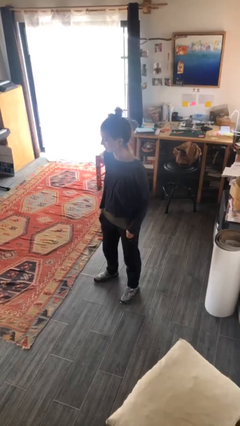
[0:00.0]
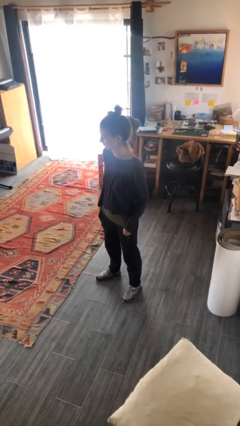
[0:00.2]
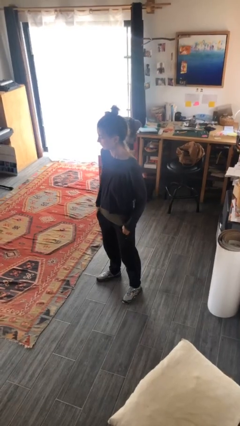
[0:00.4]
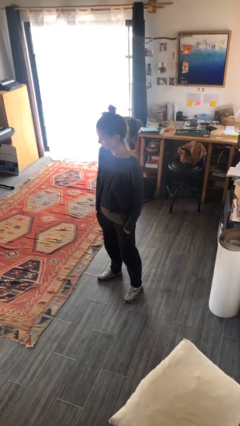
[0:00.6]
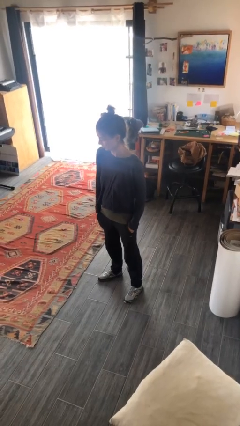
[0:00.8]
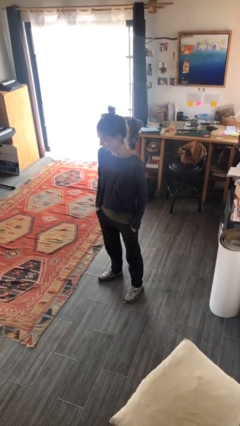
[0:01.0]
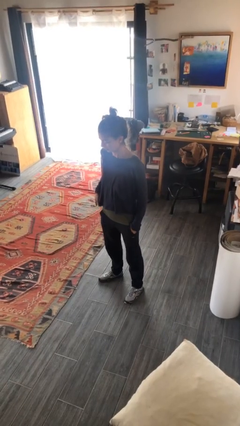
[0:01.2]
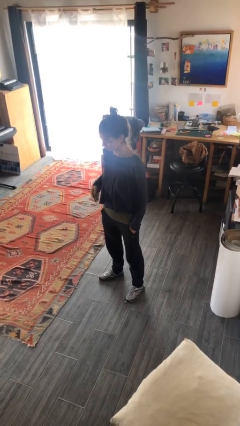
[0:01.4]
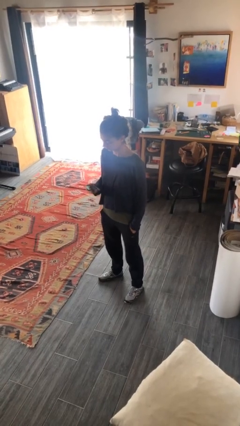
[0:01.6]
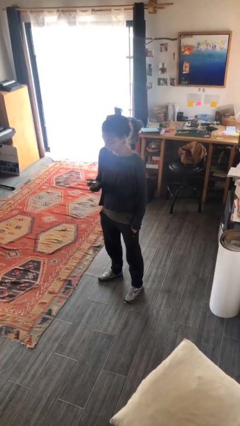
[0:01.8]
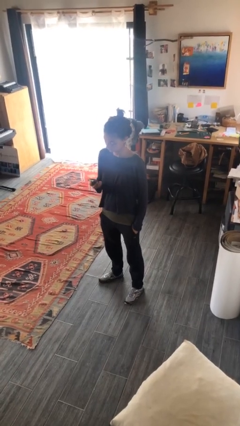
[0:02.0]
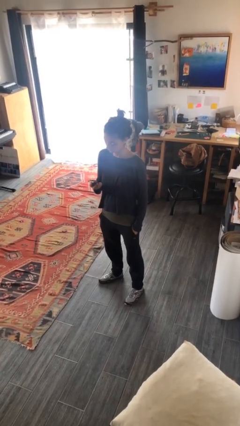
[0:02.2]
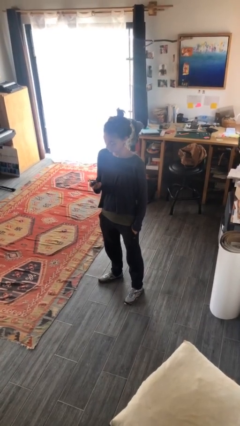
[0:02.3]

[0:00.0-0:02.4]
person takes phone from pocket

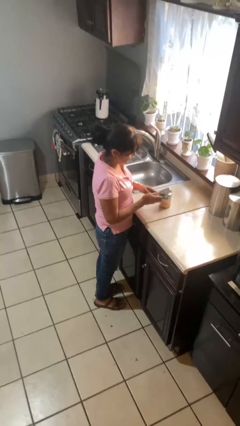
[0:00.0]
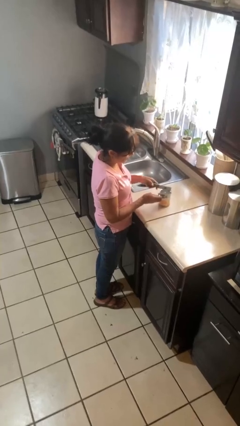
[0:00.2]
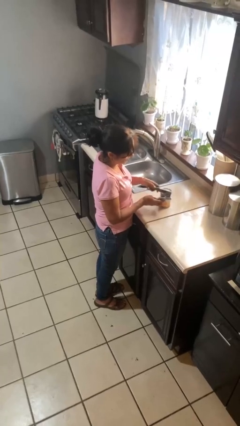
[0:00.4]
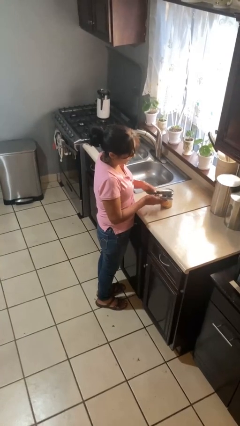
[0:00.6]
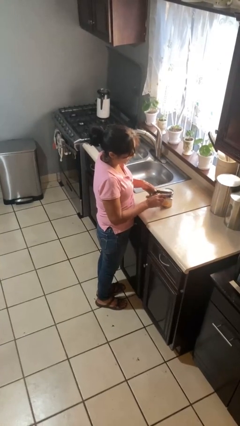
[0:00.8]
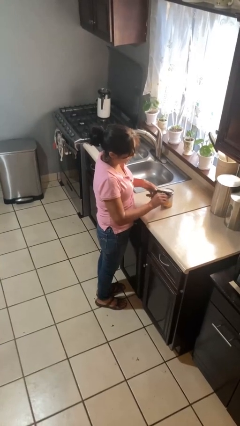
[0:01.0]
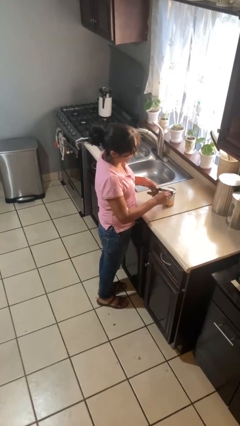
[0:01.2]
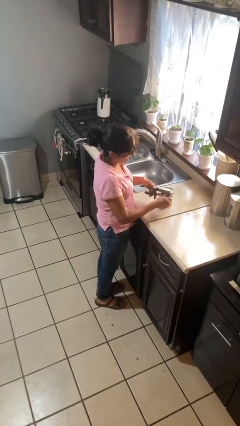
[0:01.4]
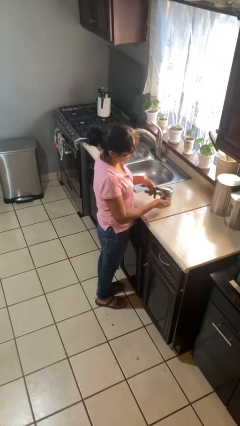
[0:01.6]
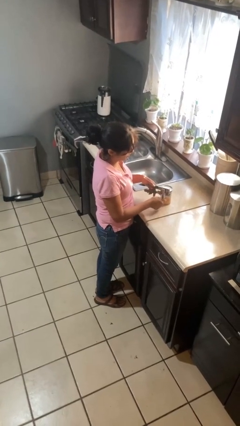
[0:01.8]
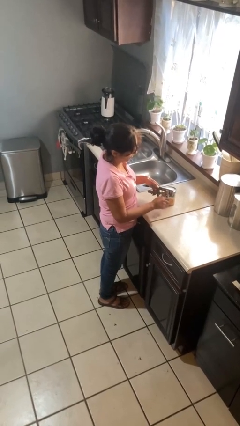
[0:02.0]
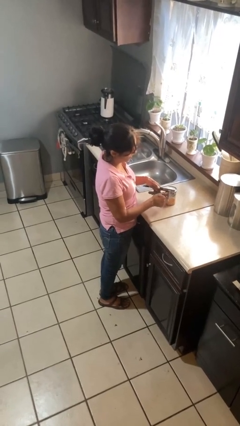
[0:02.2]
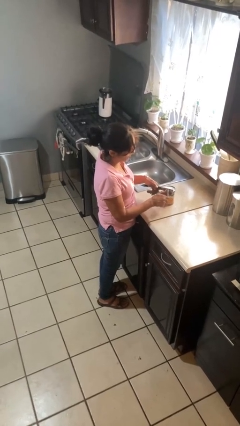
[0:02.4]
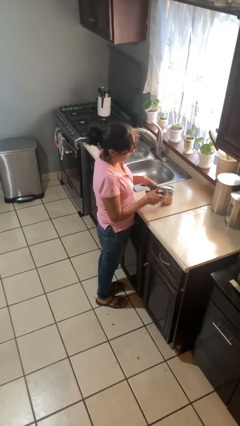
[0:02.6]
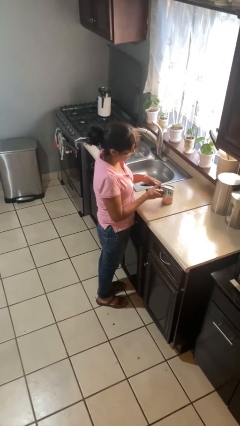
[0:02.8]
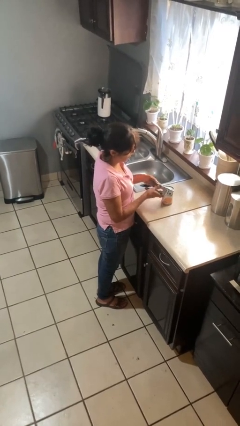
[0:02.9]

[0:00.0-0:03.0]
person opens can with can opener

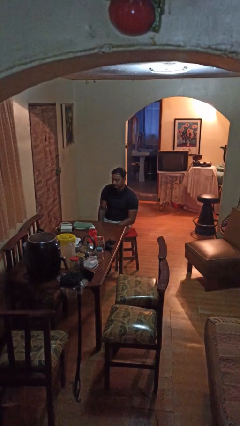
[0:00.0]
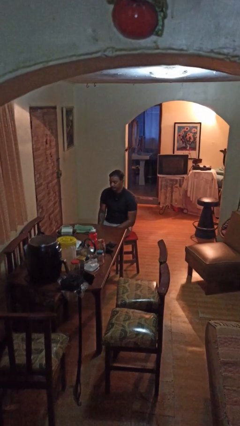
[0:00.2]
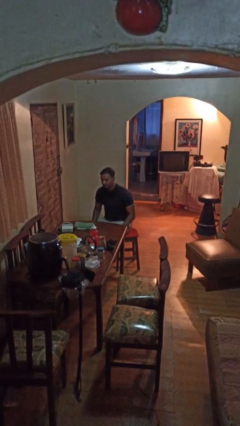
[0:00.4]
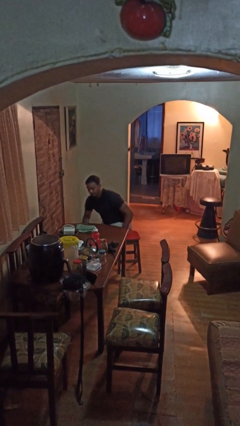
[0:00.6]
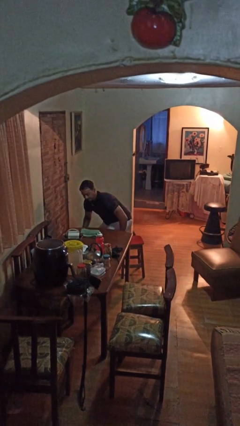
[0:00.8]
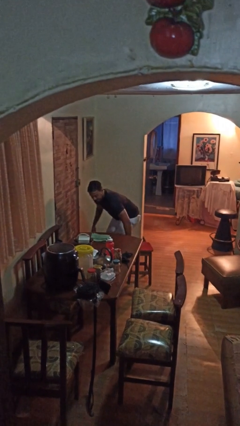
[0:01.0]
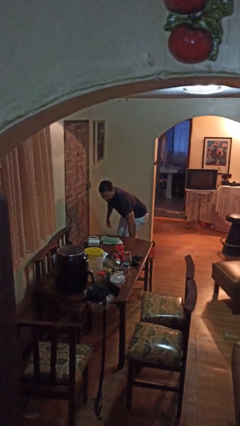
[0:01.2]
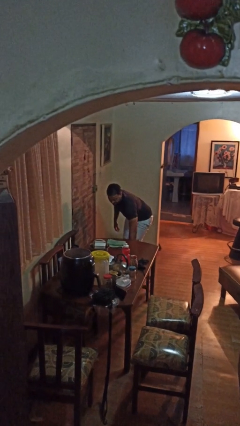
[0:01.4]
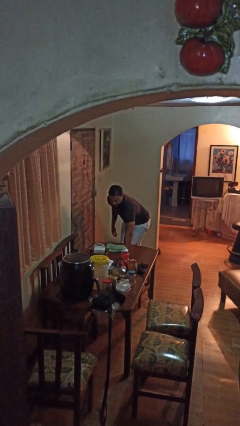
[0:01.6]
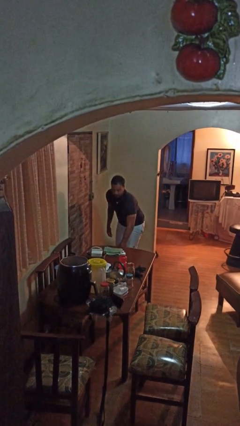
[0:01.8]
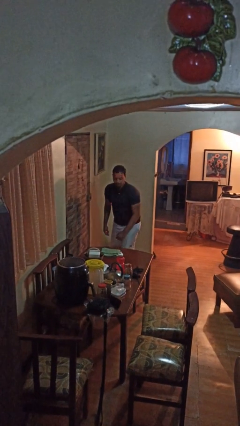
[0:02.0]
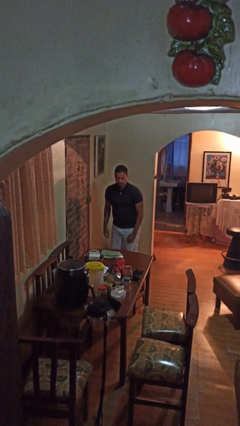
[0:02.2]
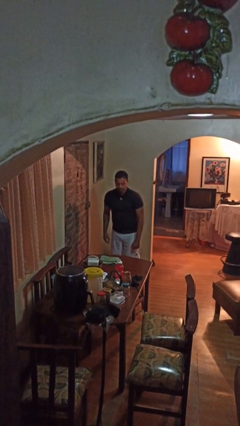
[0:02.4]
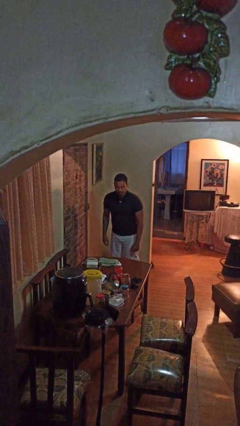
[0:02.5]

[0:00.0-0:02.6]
person stands up

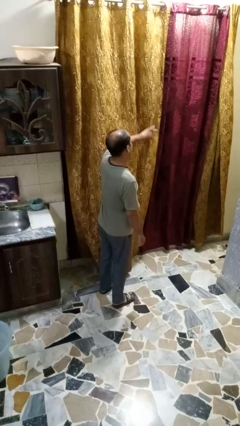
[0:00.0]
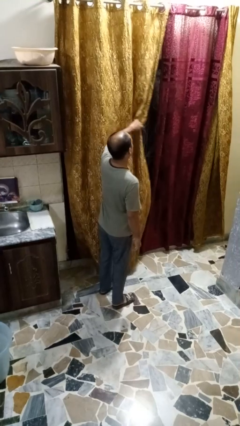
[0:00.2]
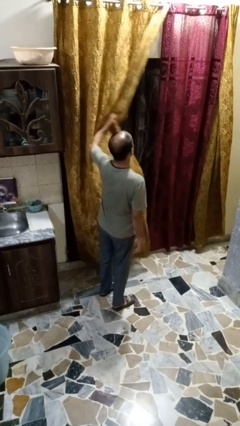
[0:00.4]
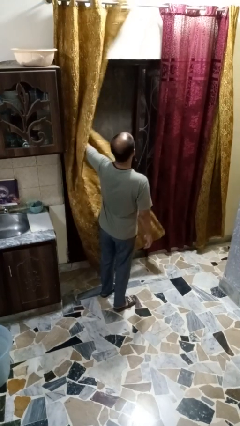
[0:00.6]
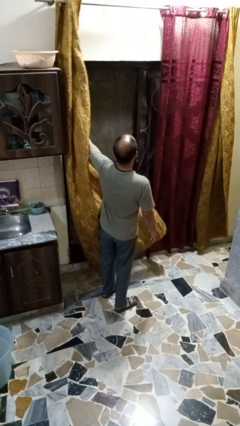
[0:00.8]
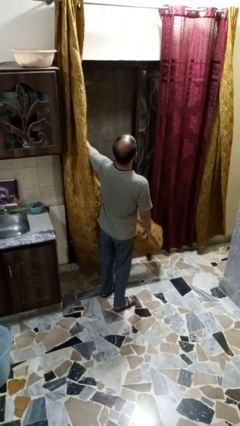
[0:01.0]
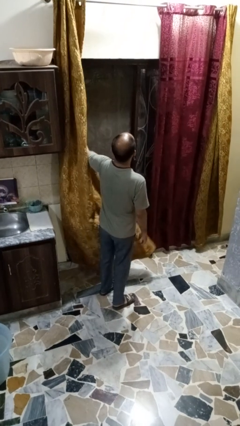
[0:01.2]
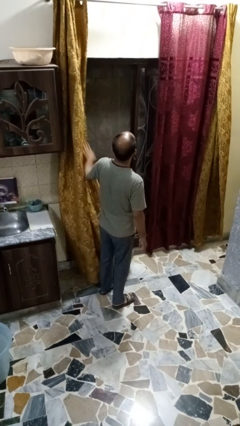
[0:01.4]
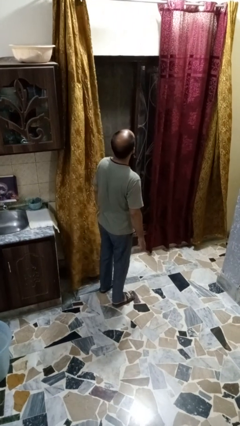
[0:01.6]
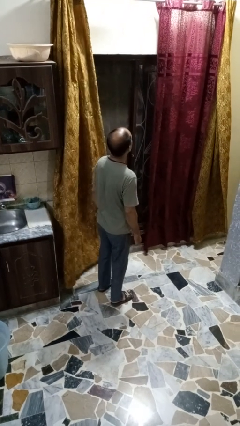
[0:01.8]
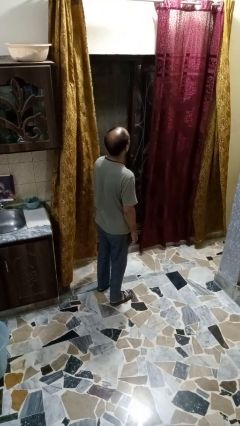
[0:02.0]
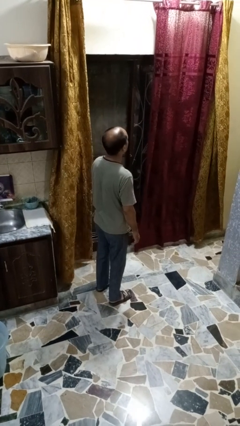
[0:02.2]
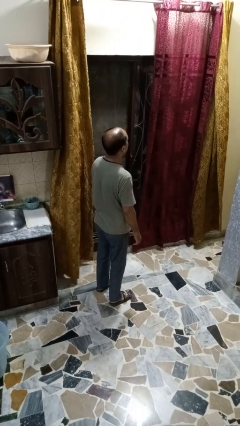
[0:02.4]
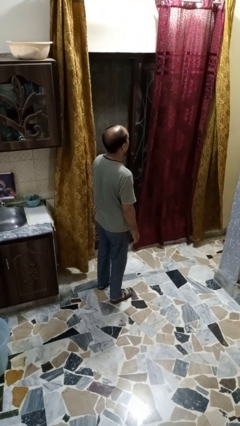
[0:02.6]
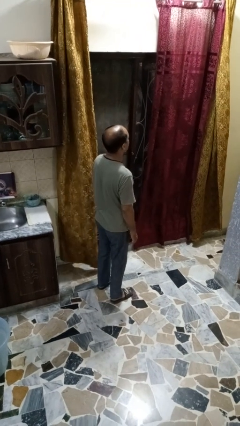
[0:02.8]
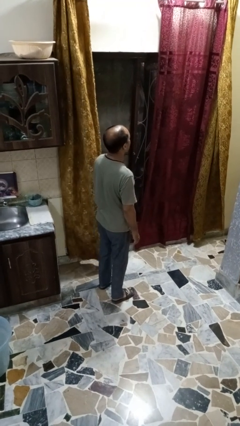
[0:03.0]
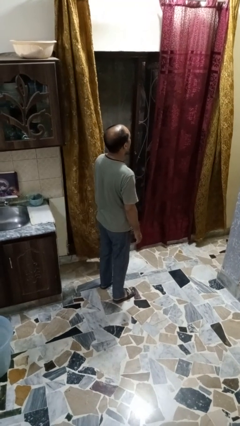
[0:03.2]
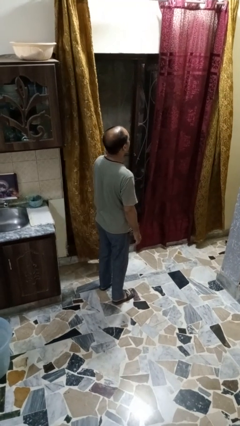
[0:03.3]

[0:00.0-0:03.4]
person opens curtains

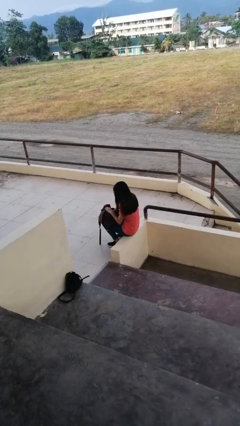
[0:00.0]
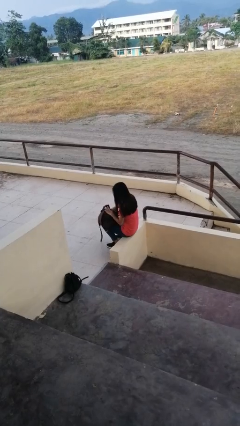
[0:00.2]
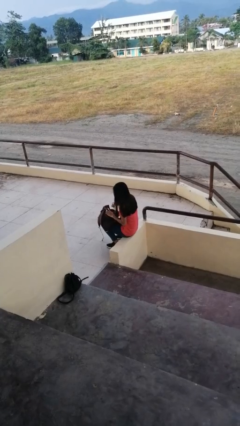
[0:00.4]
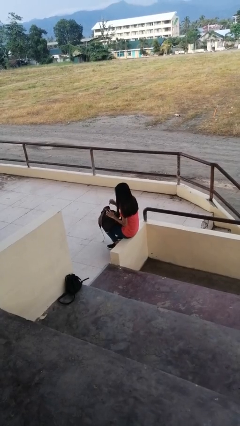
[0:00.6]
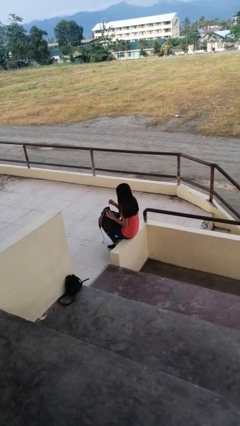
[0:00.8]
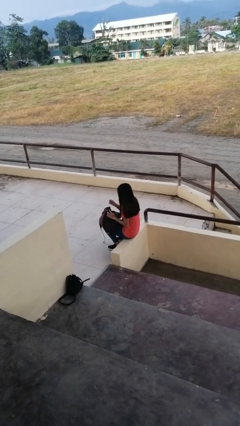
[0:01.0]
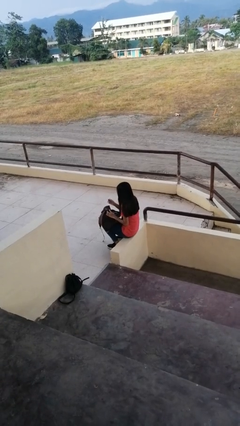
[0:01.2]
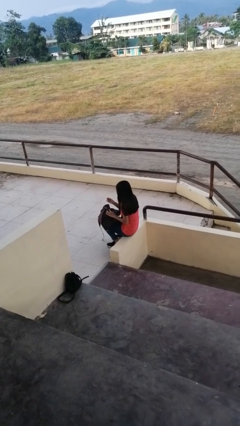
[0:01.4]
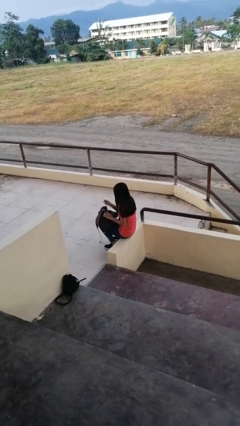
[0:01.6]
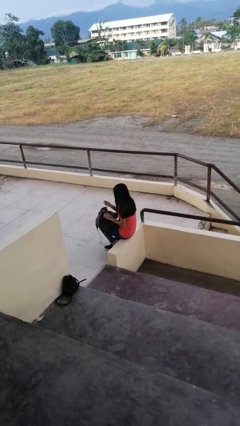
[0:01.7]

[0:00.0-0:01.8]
person takes object from backpack

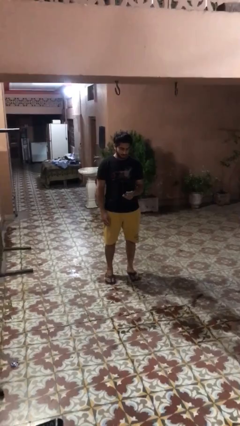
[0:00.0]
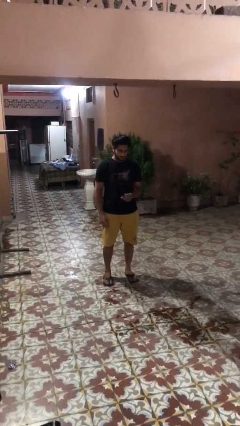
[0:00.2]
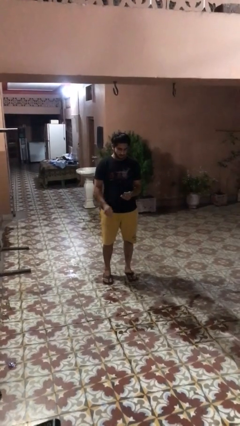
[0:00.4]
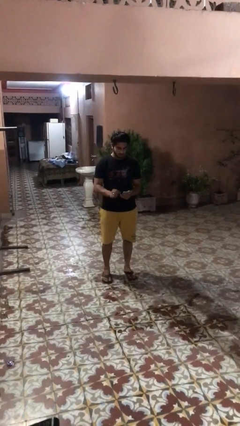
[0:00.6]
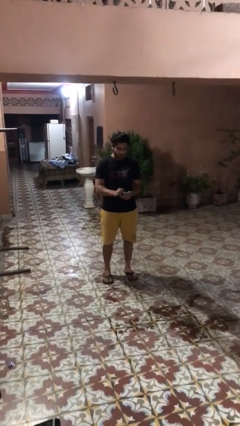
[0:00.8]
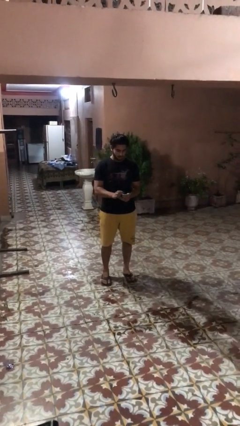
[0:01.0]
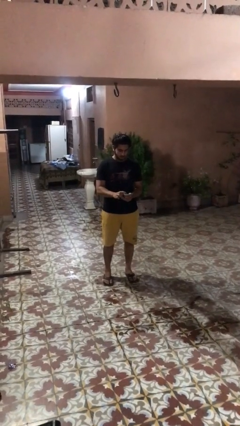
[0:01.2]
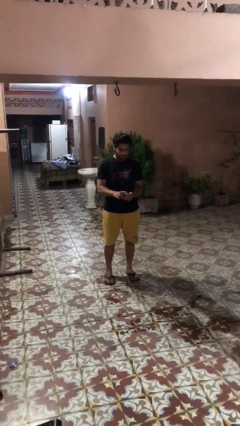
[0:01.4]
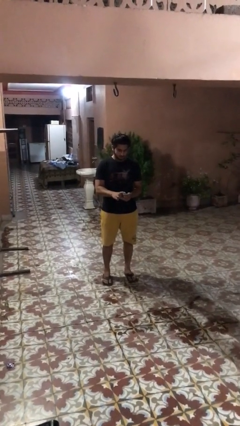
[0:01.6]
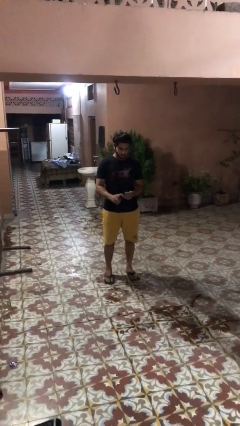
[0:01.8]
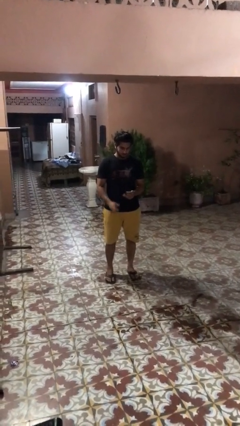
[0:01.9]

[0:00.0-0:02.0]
person gestures zoom in

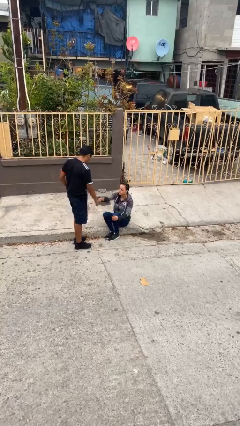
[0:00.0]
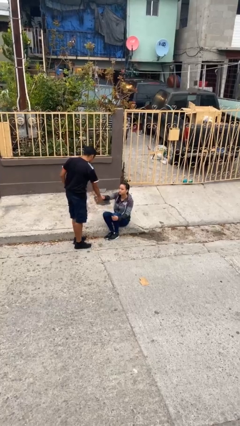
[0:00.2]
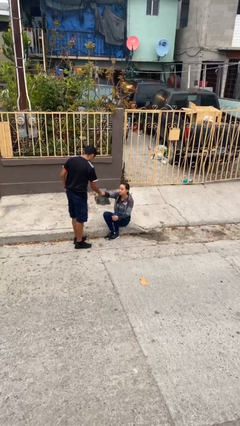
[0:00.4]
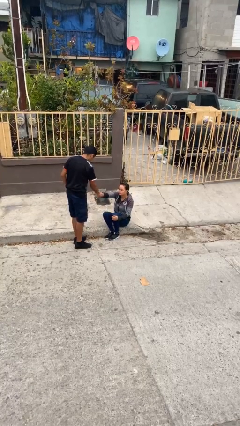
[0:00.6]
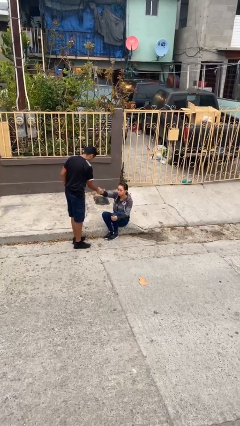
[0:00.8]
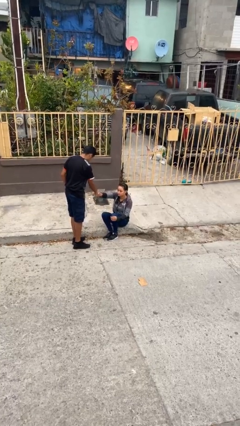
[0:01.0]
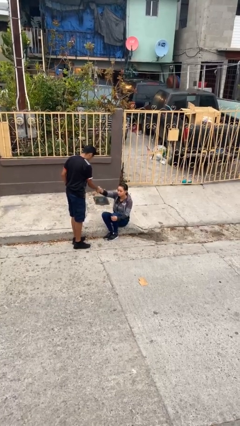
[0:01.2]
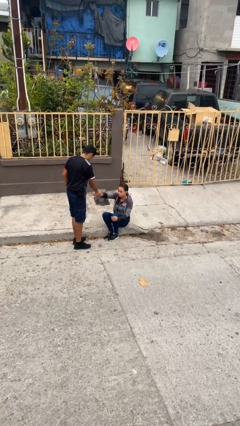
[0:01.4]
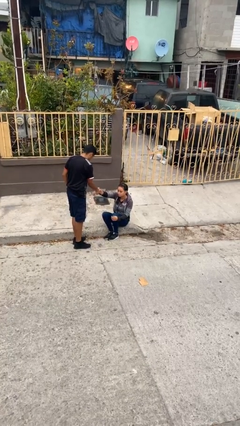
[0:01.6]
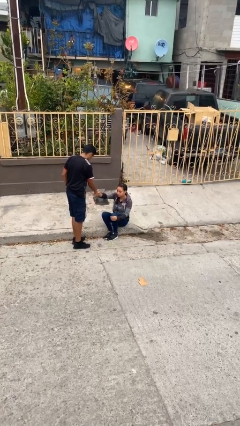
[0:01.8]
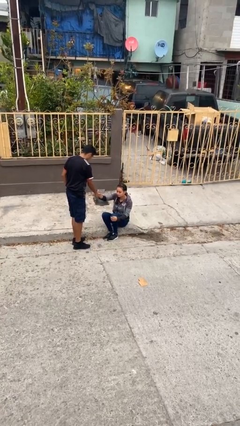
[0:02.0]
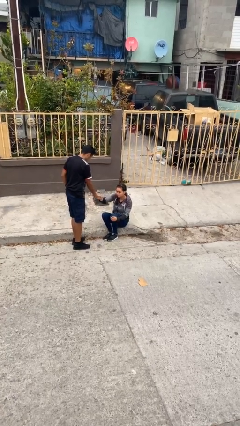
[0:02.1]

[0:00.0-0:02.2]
person shakes hand
